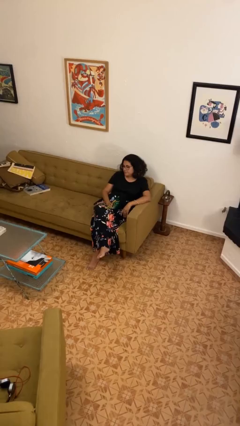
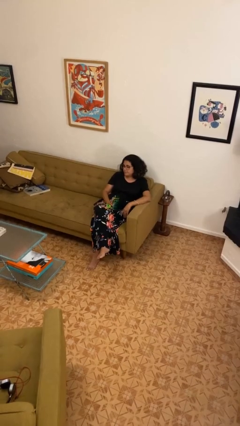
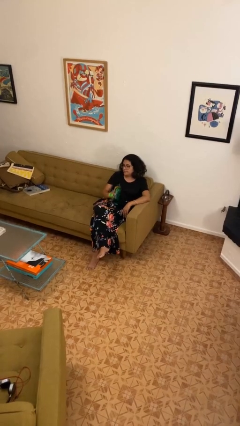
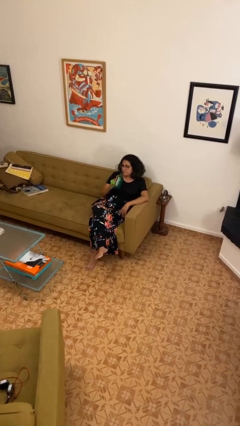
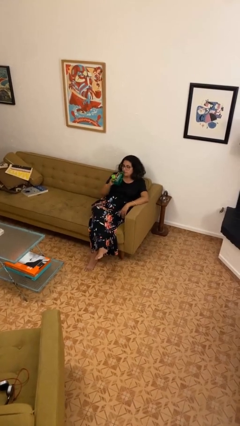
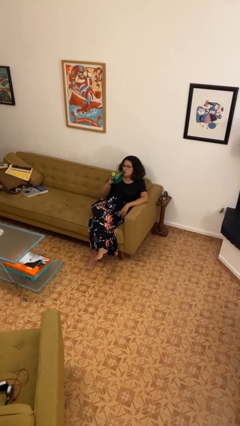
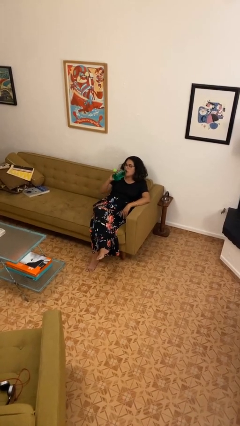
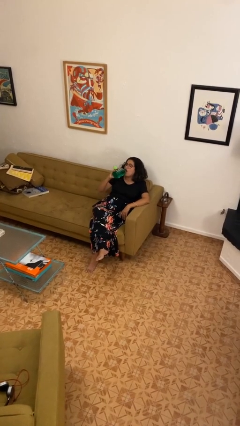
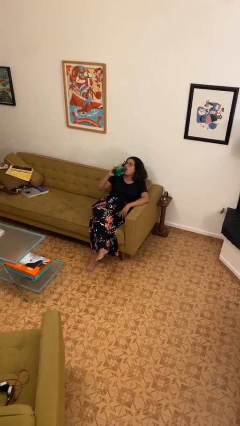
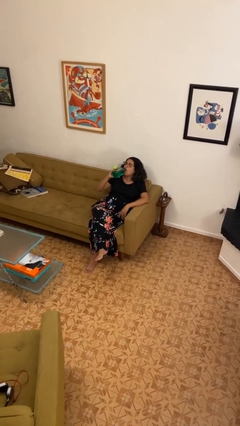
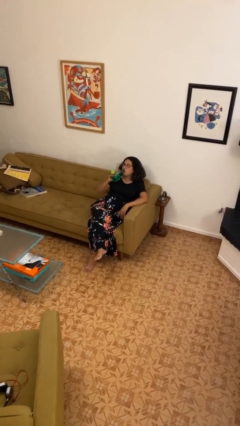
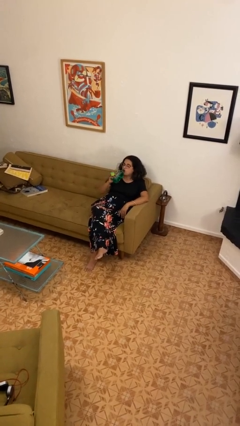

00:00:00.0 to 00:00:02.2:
person drinks from bottle

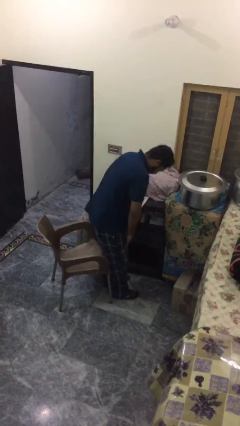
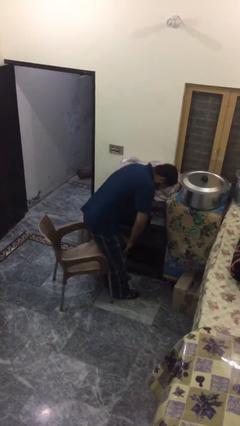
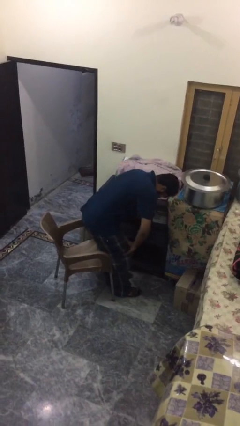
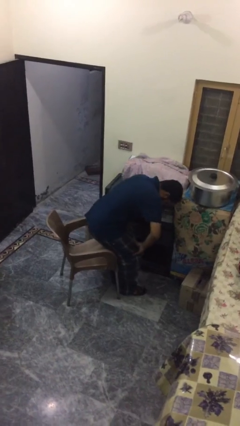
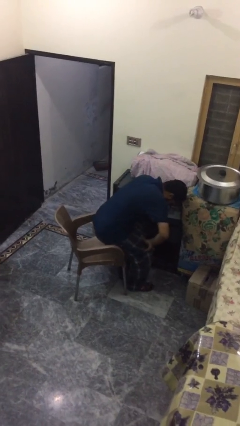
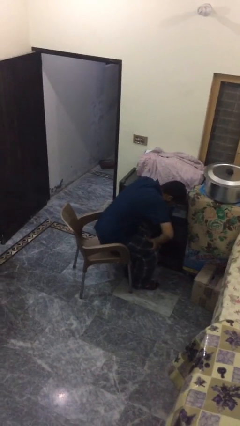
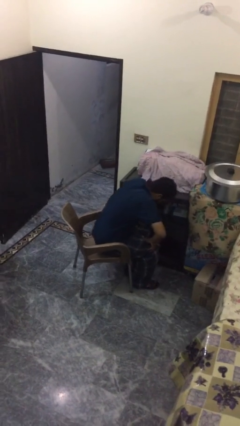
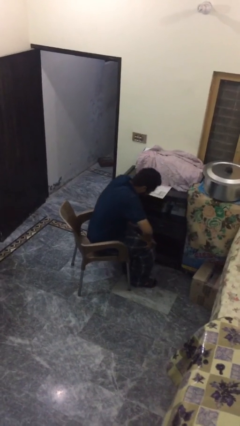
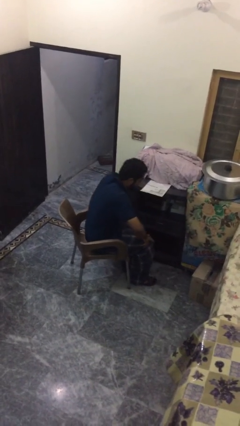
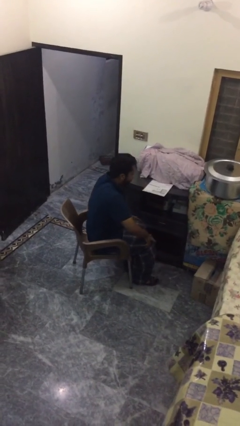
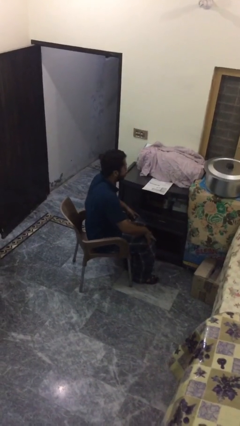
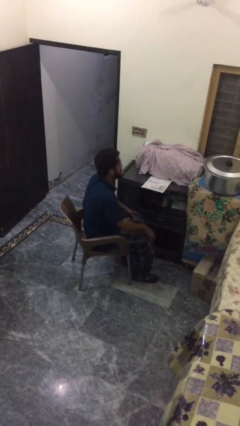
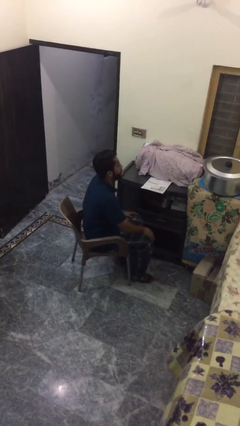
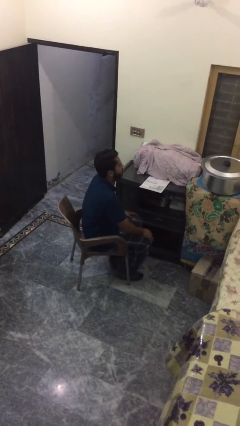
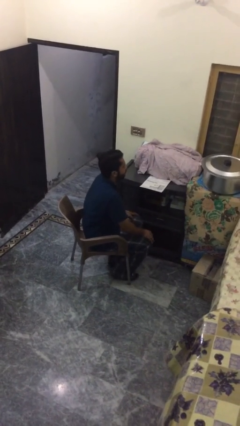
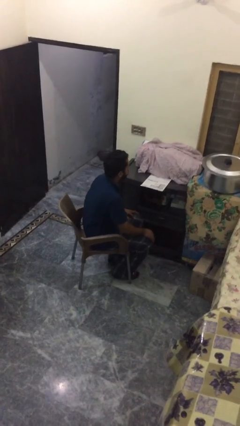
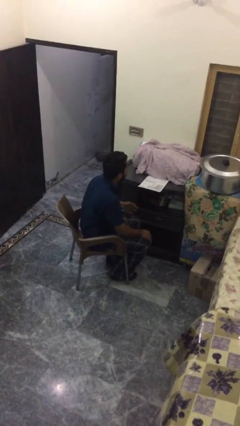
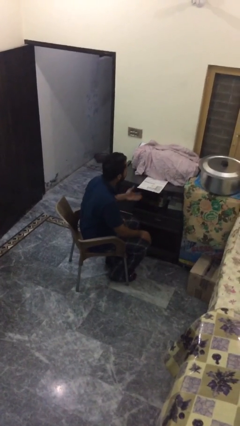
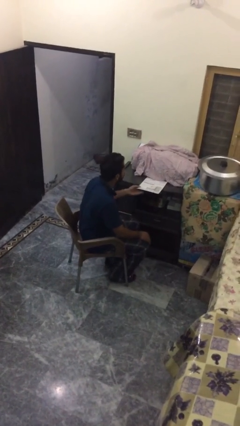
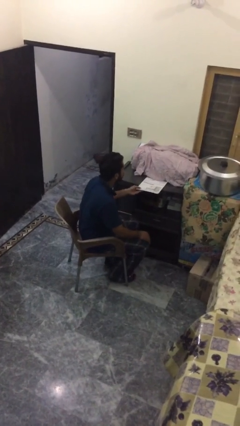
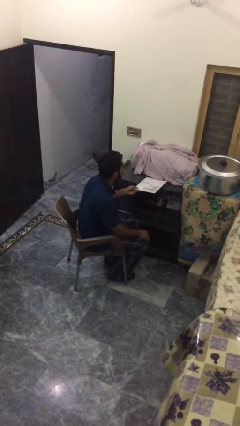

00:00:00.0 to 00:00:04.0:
person sits down

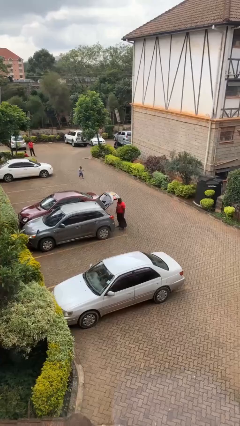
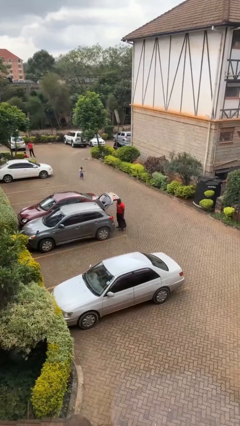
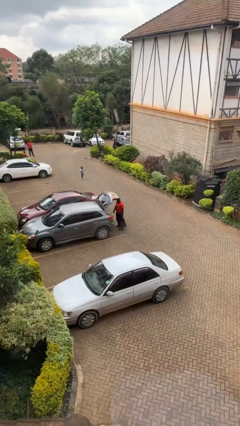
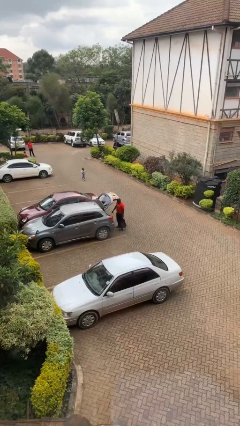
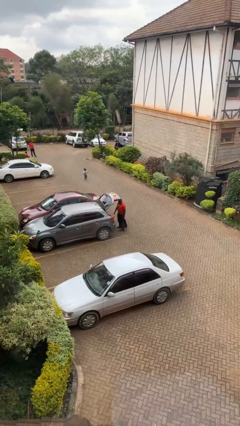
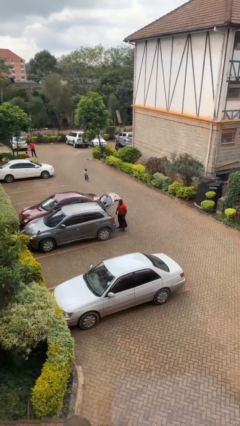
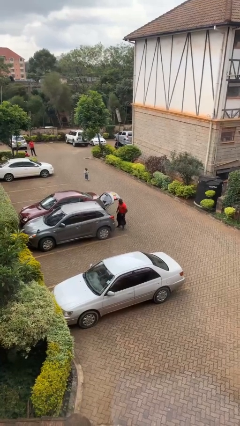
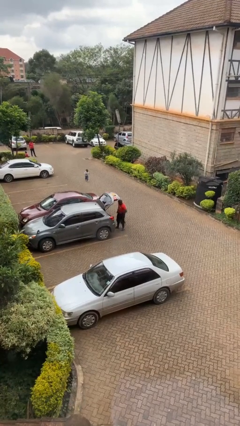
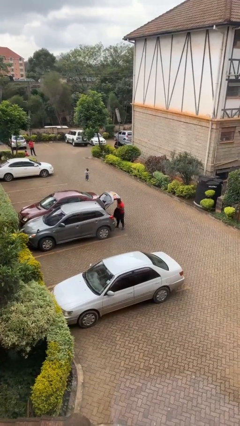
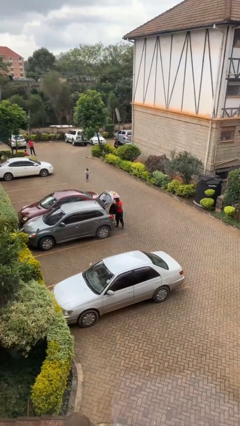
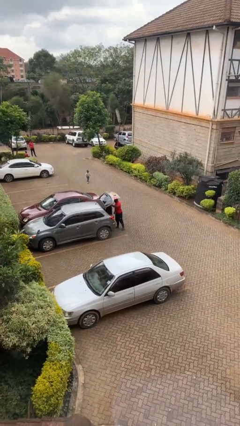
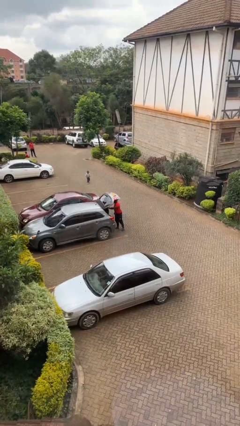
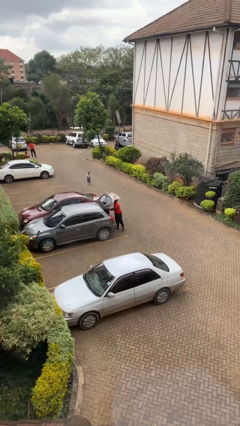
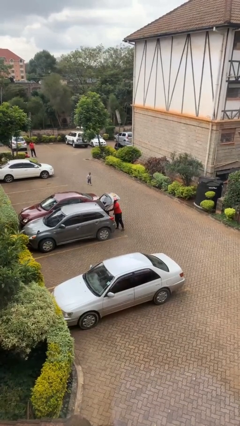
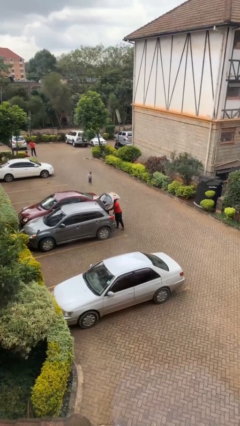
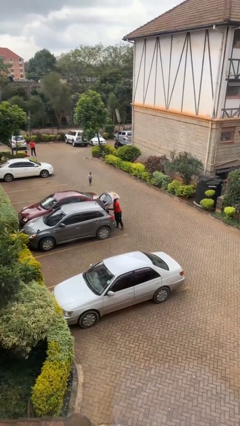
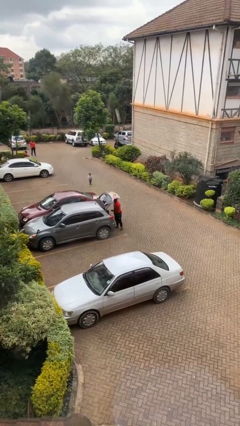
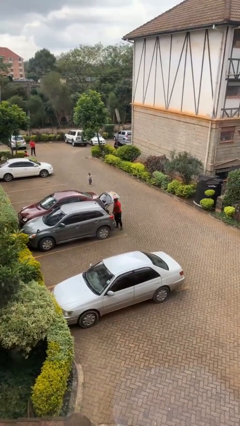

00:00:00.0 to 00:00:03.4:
person loads car

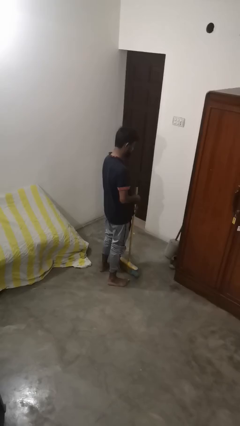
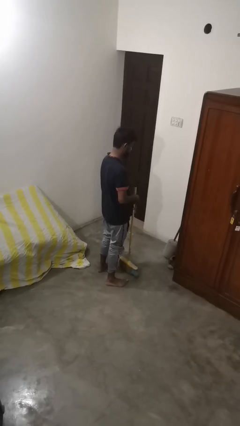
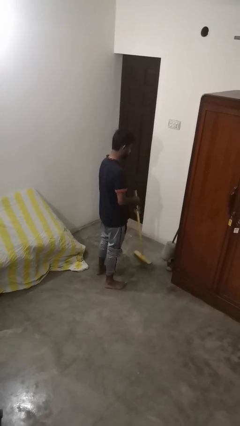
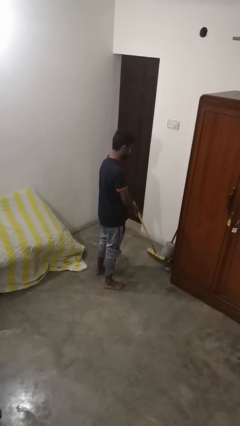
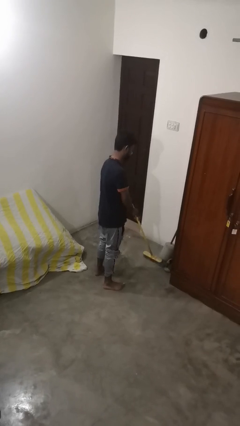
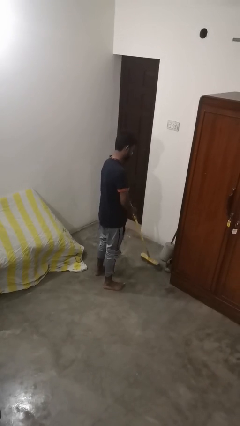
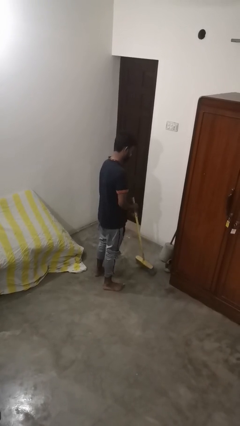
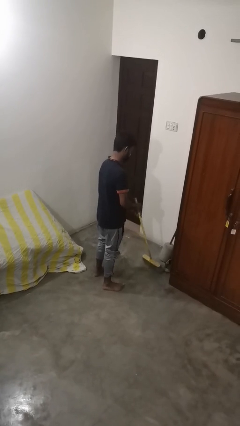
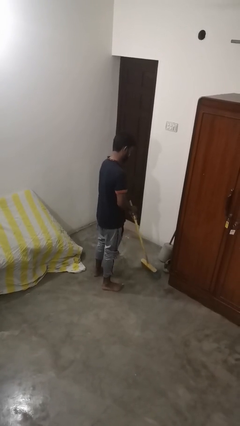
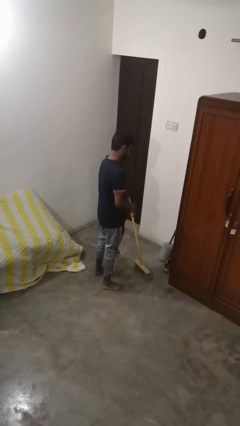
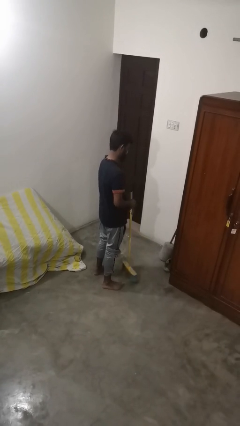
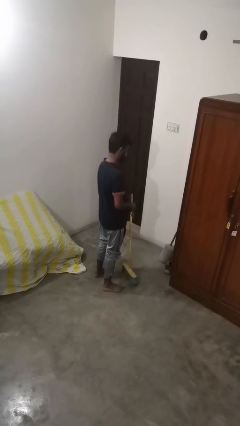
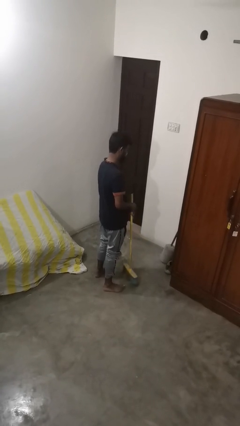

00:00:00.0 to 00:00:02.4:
person sweeps floor

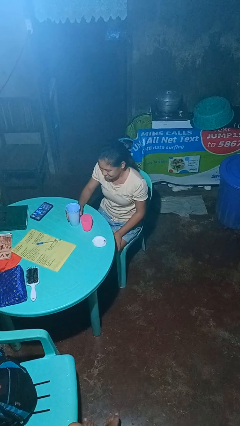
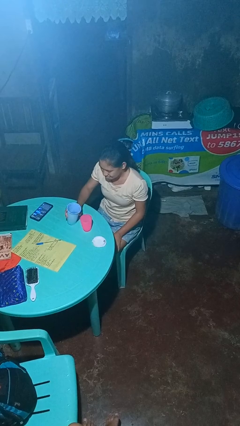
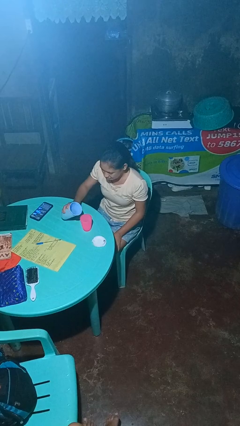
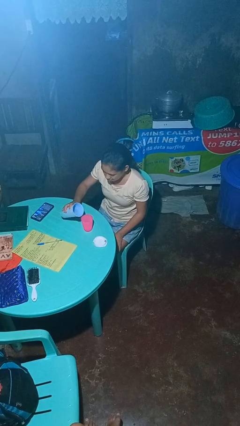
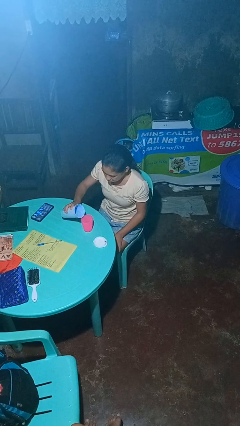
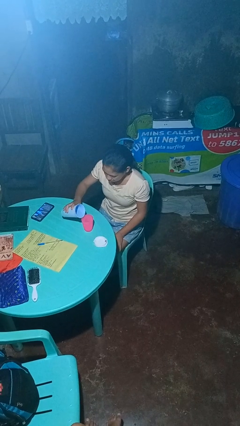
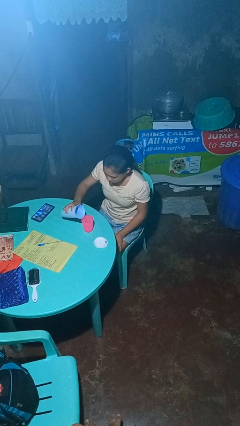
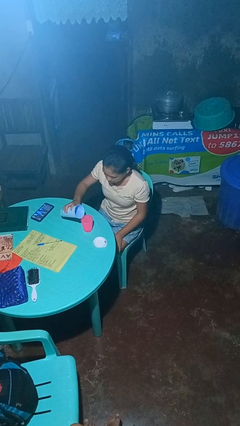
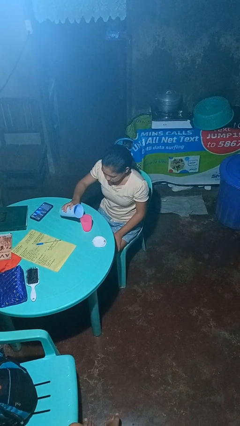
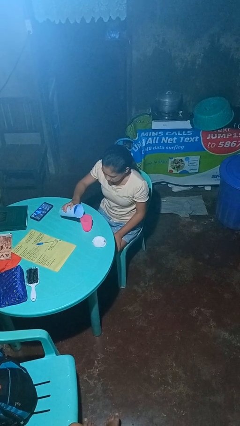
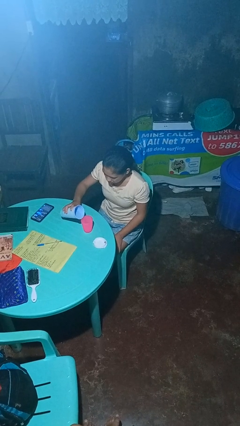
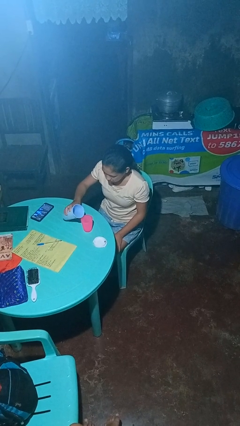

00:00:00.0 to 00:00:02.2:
person pours liquid into cup

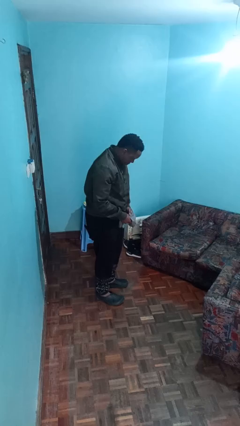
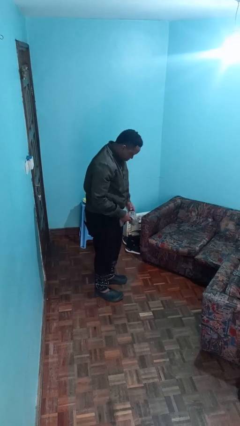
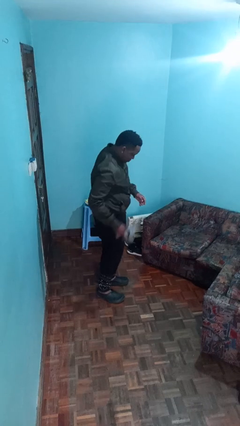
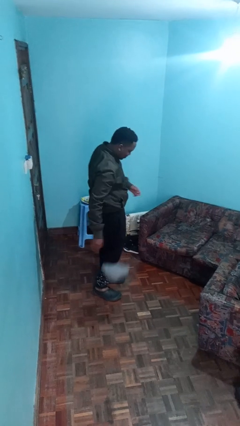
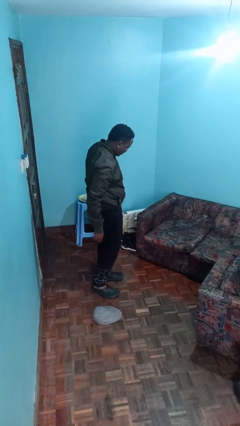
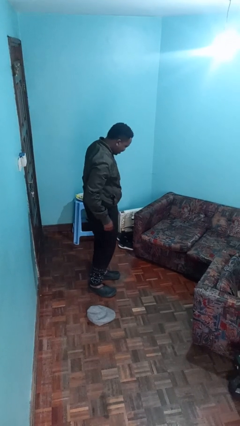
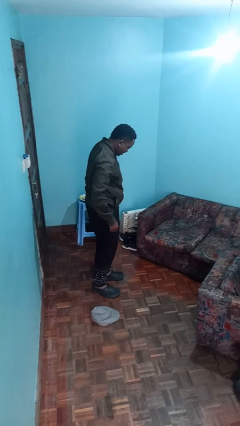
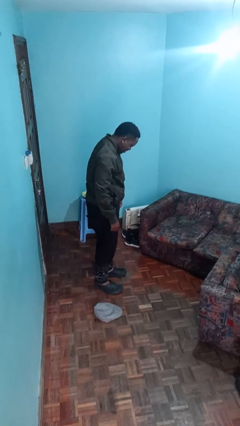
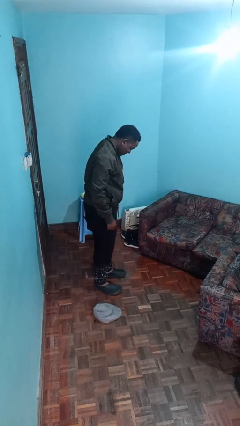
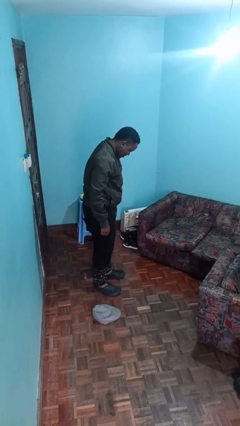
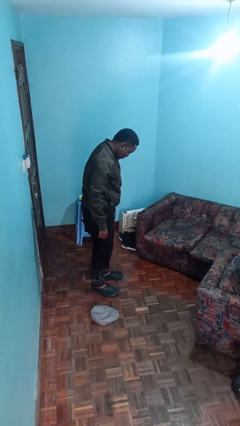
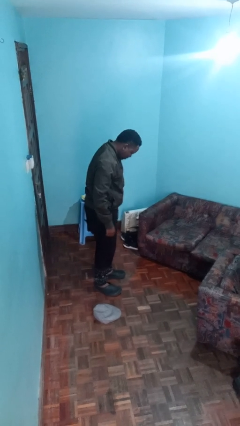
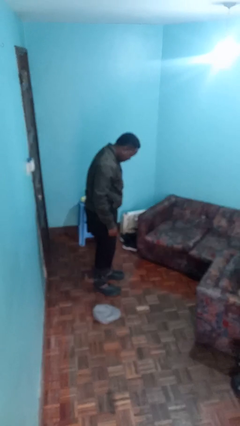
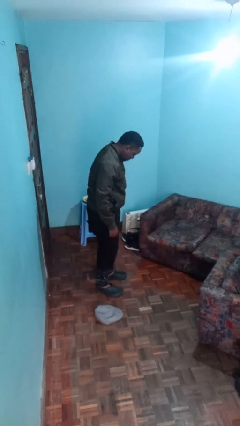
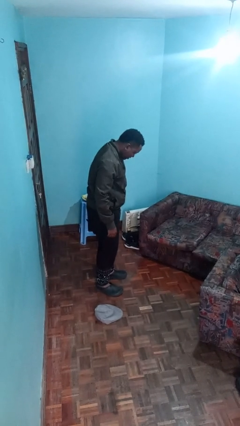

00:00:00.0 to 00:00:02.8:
person drops object

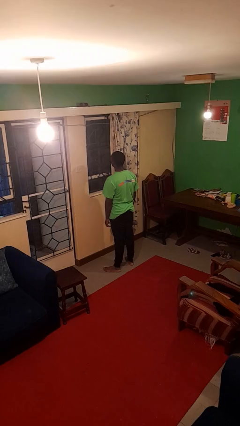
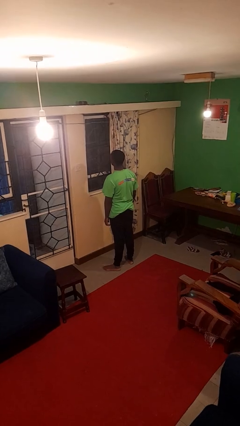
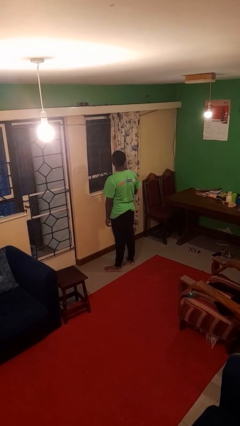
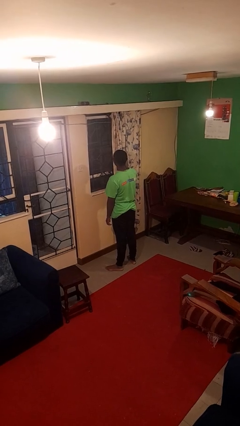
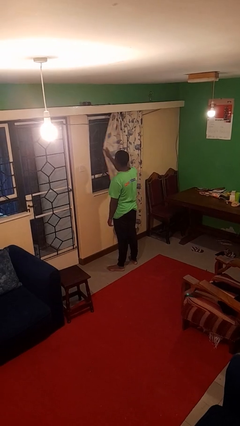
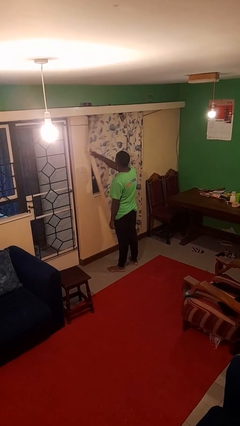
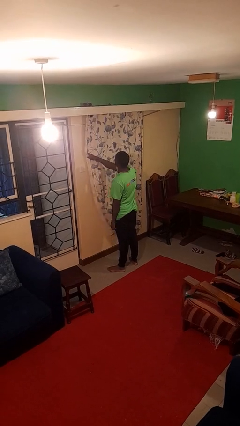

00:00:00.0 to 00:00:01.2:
person closes curtains
